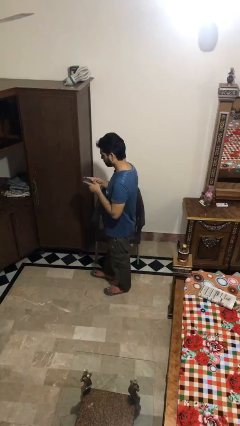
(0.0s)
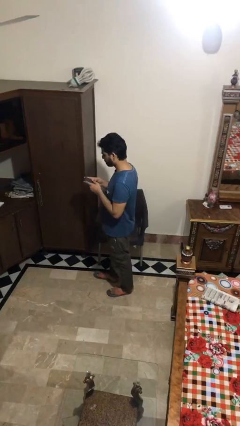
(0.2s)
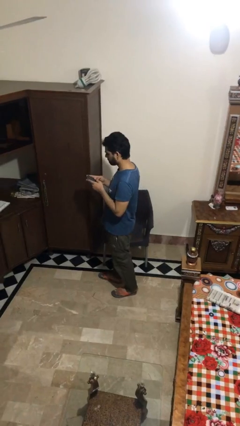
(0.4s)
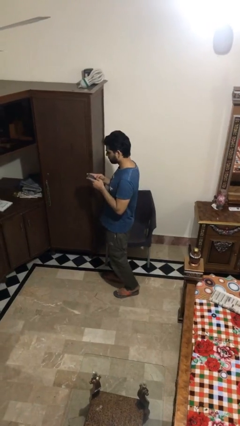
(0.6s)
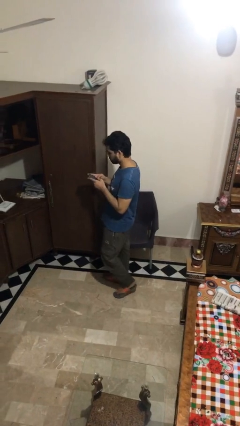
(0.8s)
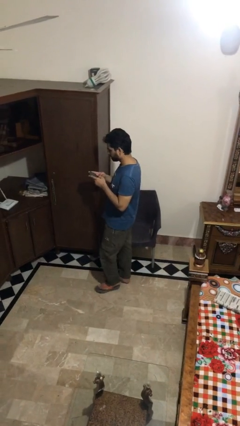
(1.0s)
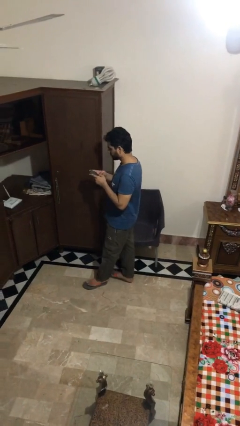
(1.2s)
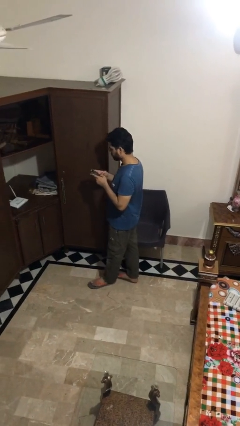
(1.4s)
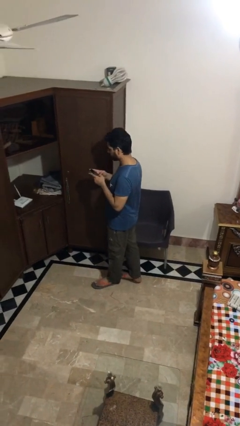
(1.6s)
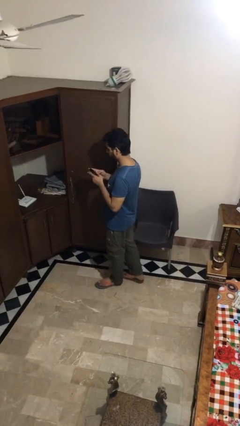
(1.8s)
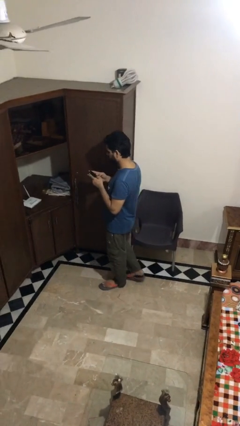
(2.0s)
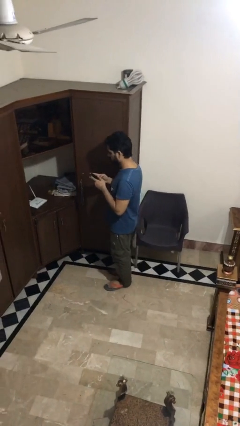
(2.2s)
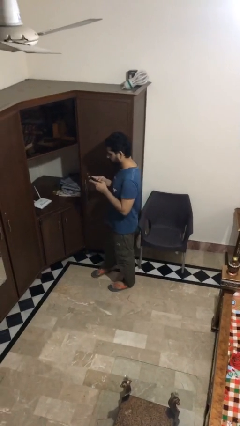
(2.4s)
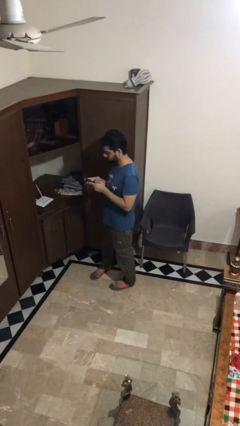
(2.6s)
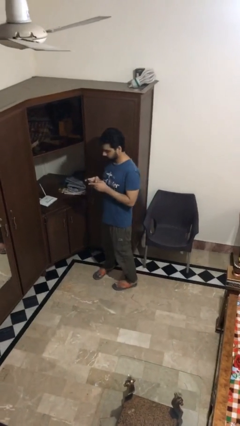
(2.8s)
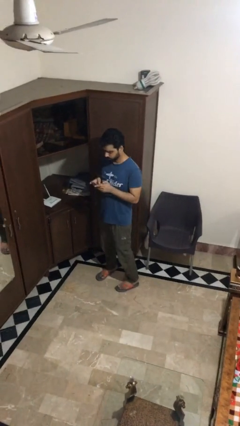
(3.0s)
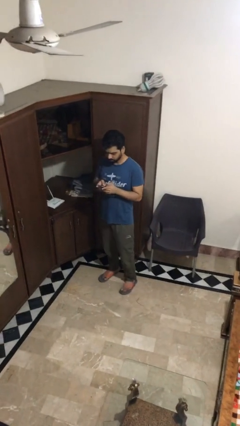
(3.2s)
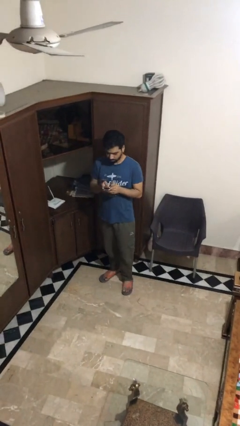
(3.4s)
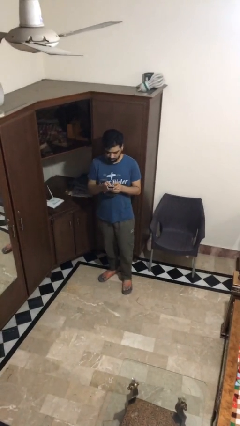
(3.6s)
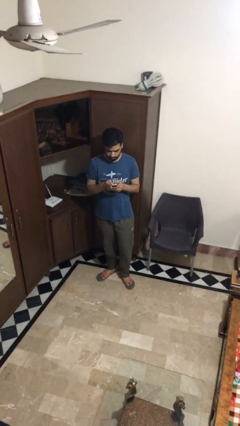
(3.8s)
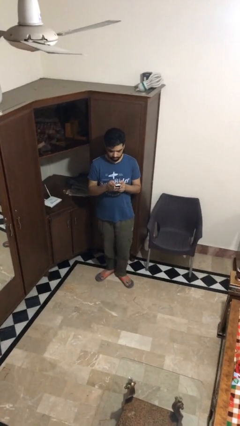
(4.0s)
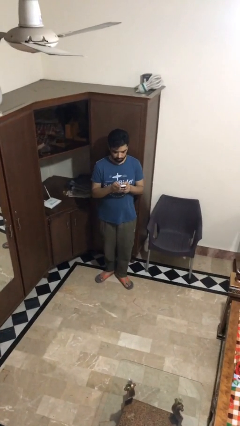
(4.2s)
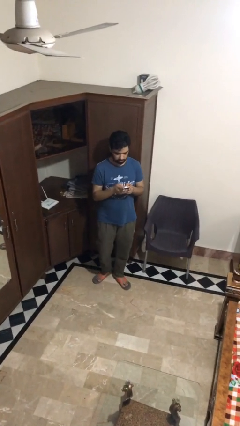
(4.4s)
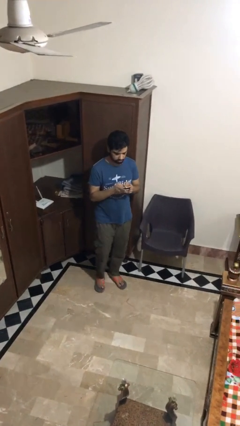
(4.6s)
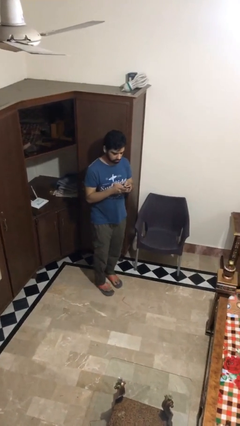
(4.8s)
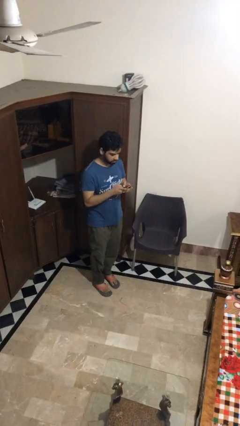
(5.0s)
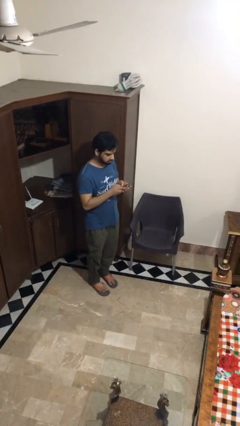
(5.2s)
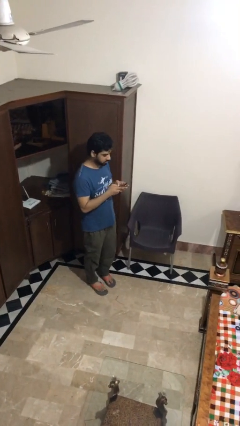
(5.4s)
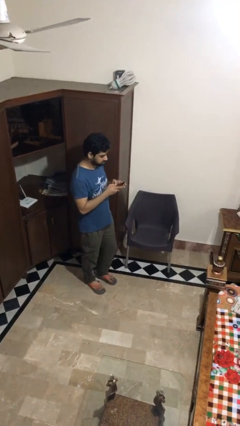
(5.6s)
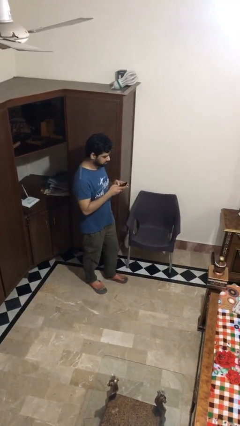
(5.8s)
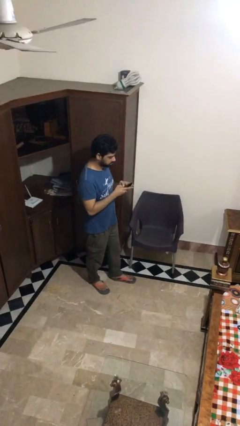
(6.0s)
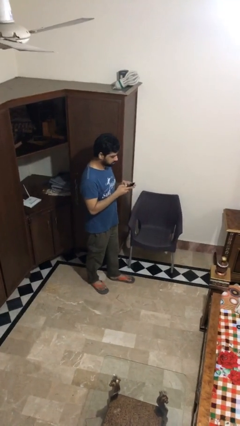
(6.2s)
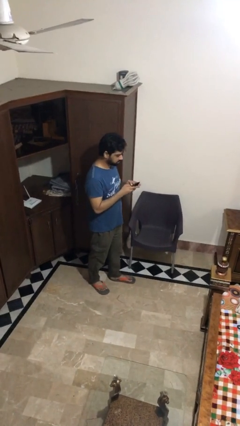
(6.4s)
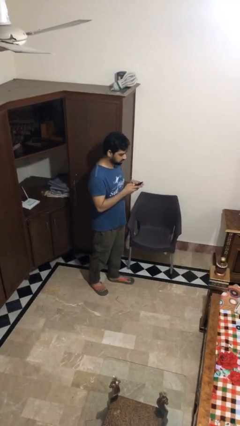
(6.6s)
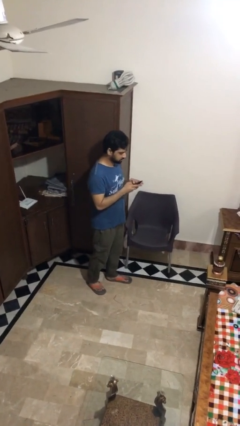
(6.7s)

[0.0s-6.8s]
person texts on phone

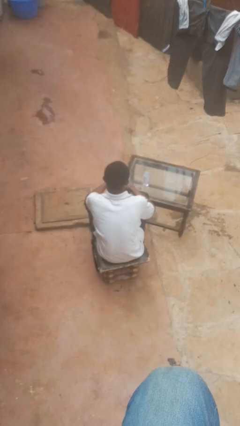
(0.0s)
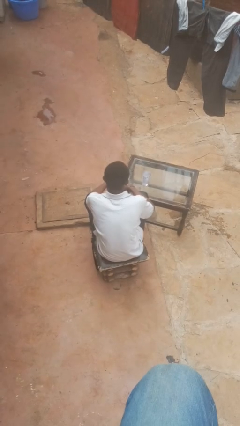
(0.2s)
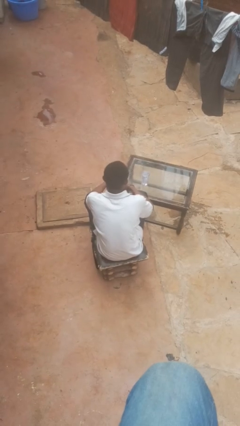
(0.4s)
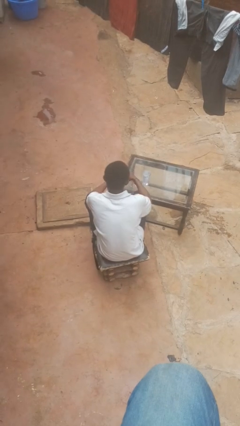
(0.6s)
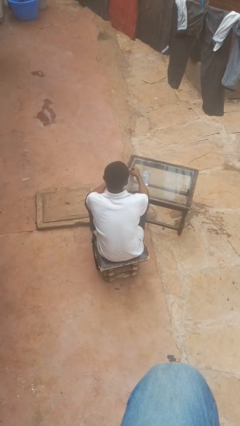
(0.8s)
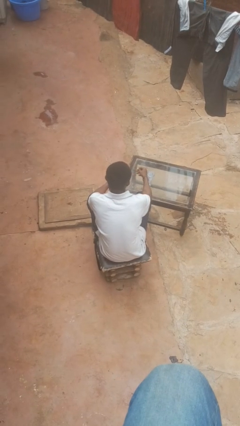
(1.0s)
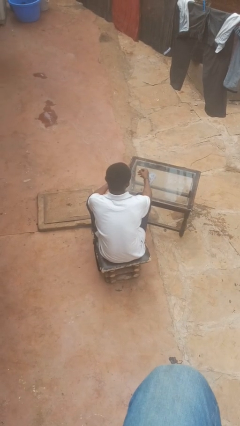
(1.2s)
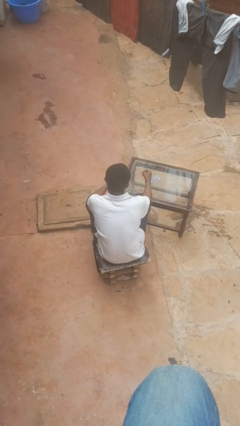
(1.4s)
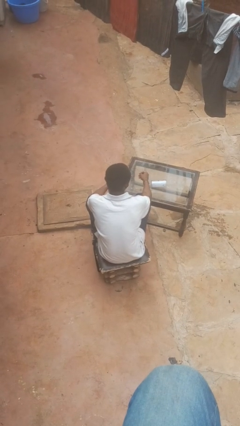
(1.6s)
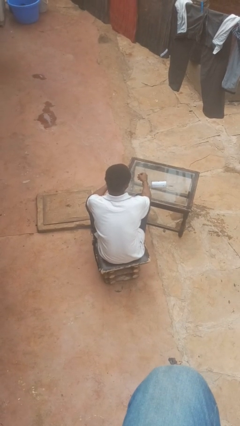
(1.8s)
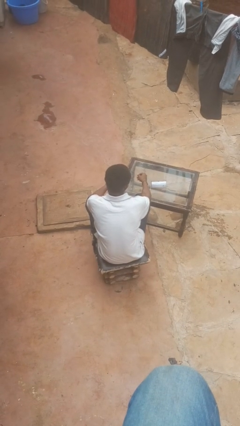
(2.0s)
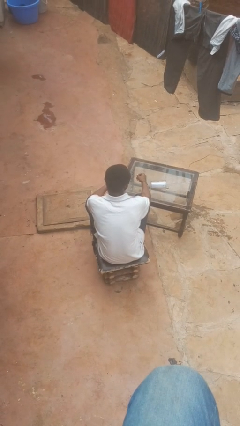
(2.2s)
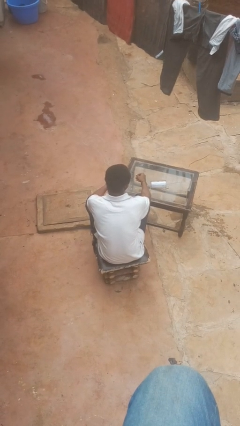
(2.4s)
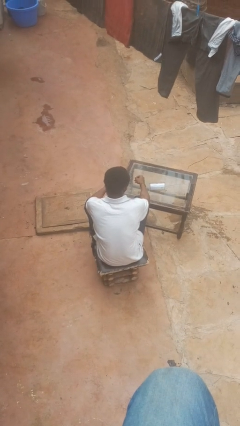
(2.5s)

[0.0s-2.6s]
person knocks over glass

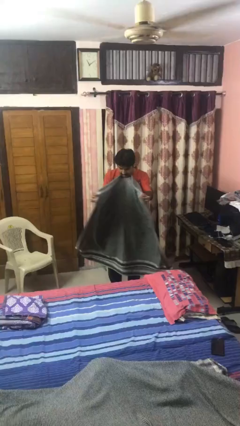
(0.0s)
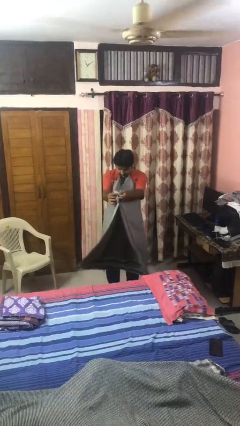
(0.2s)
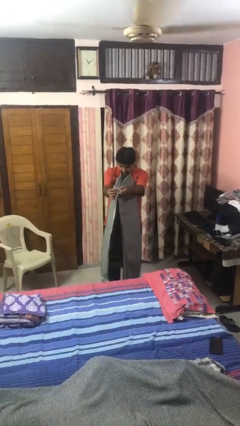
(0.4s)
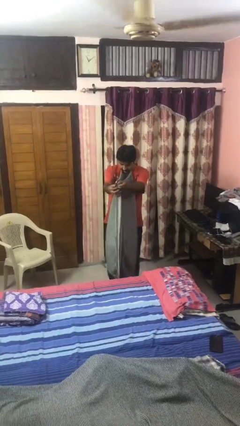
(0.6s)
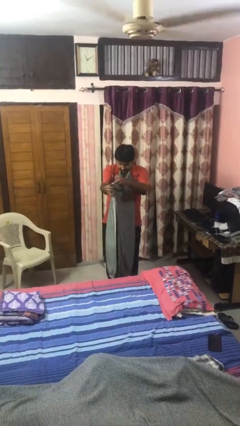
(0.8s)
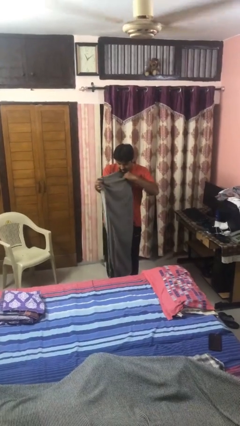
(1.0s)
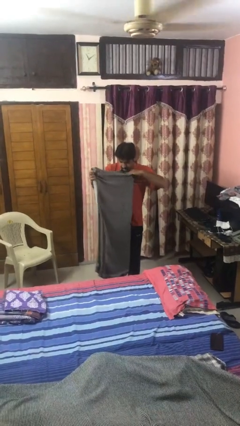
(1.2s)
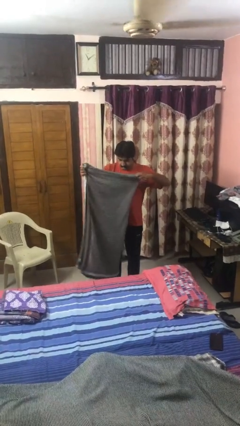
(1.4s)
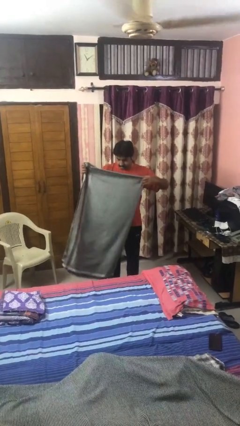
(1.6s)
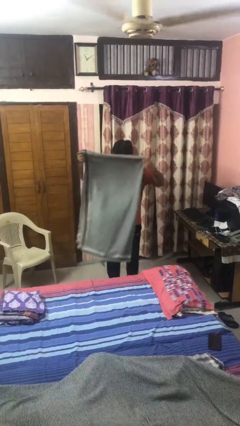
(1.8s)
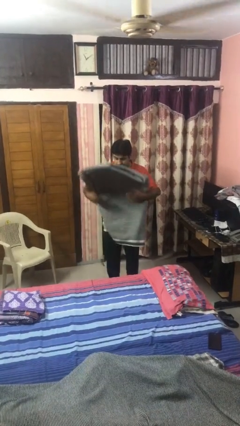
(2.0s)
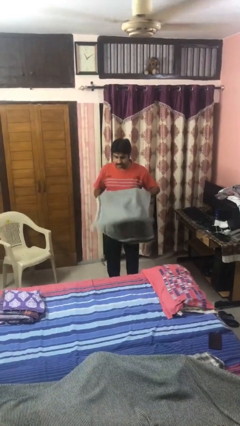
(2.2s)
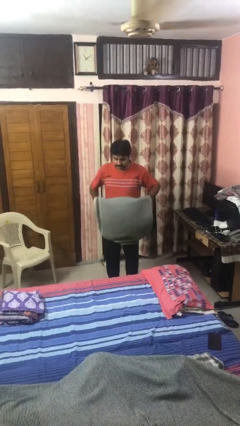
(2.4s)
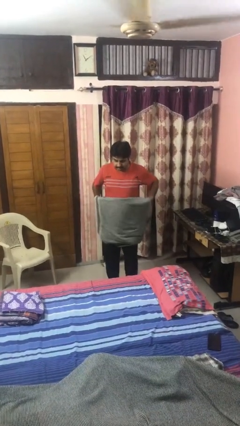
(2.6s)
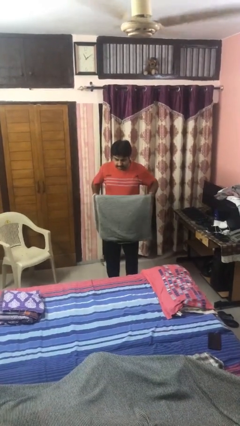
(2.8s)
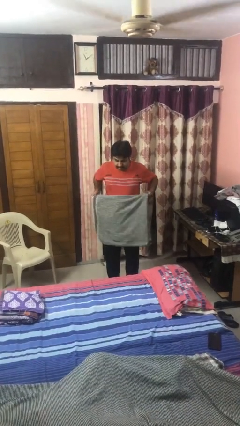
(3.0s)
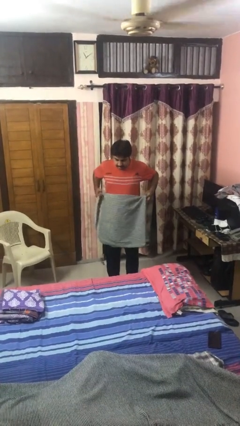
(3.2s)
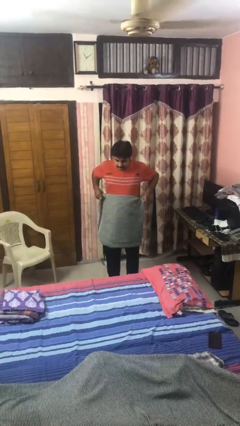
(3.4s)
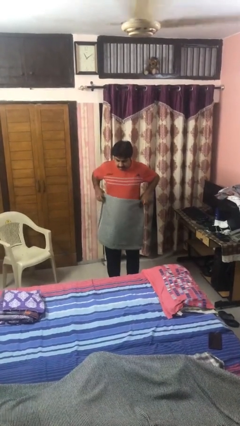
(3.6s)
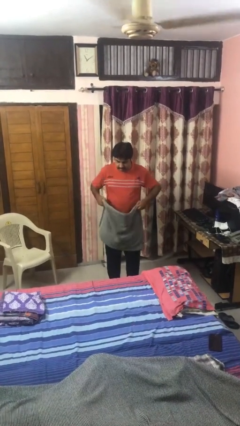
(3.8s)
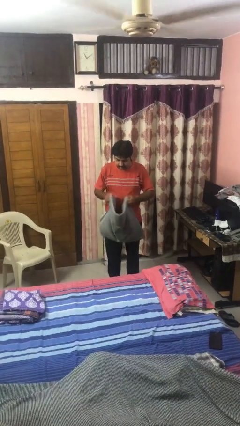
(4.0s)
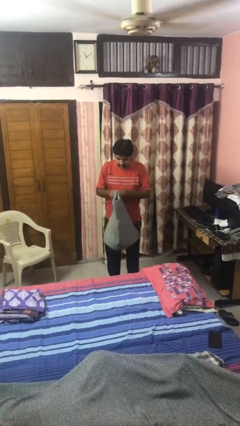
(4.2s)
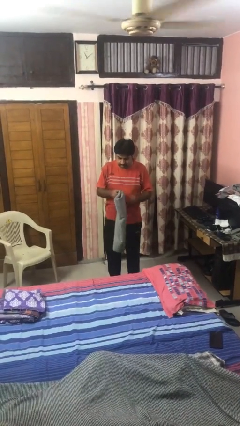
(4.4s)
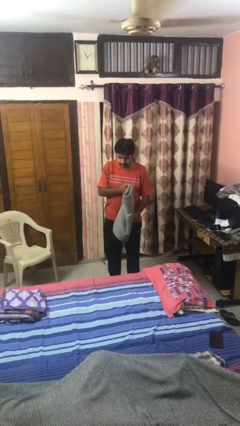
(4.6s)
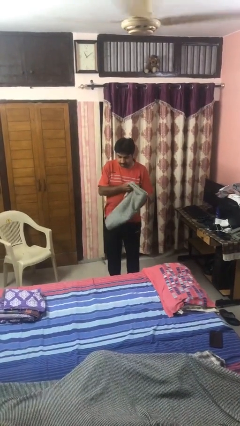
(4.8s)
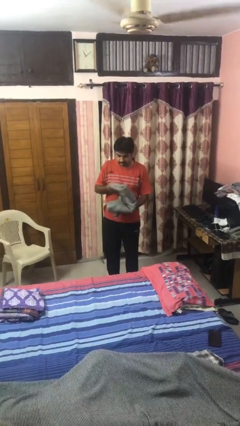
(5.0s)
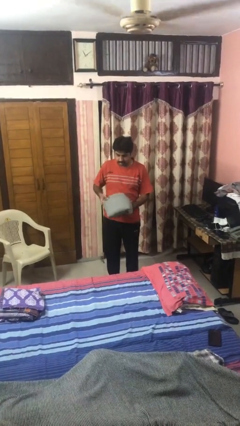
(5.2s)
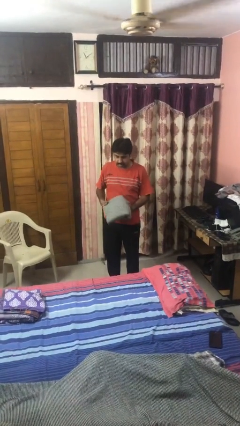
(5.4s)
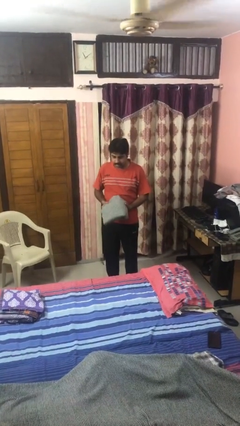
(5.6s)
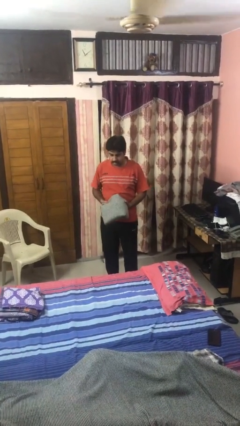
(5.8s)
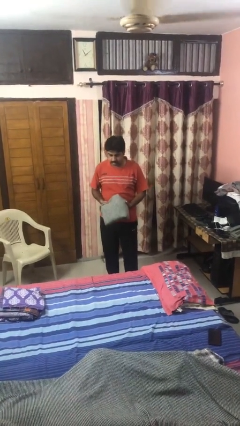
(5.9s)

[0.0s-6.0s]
person folds blanket

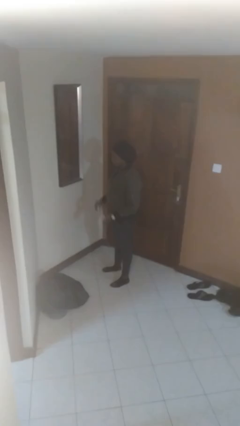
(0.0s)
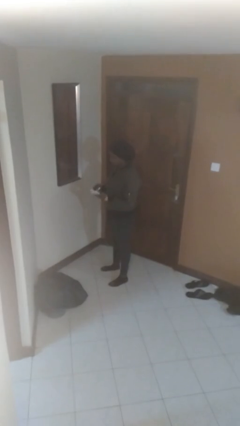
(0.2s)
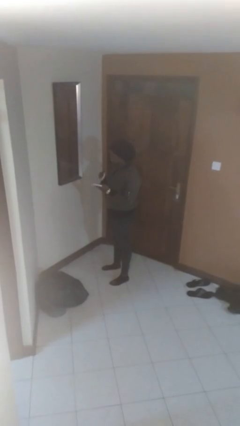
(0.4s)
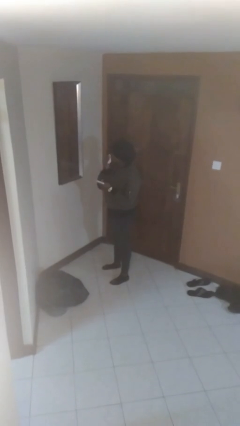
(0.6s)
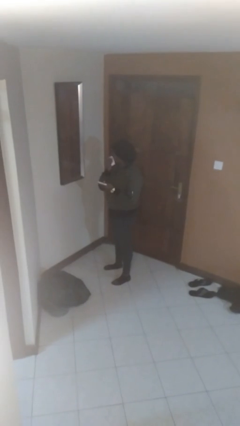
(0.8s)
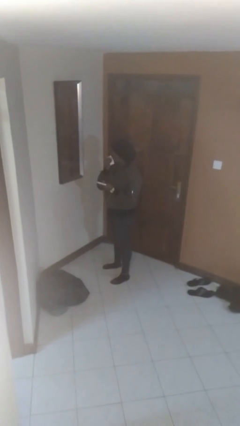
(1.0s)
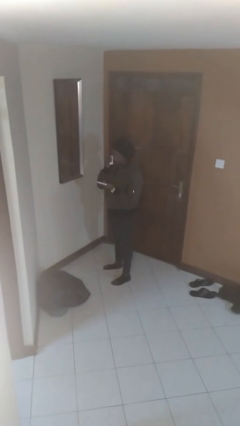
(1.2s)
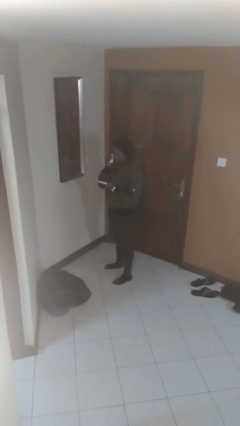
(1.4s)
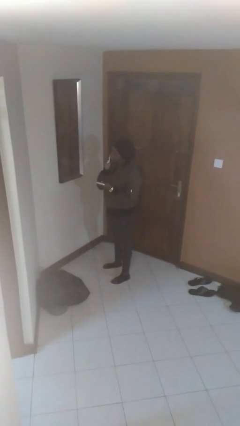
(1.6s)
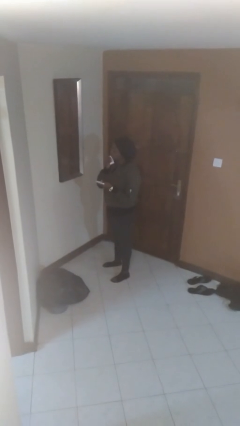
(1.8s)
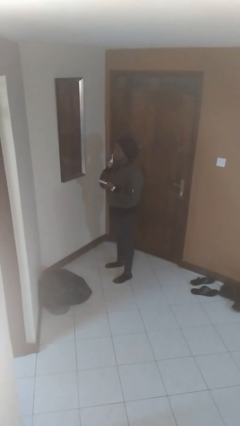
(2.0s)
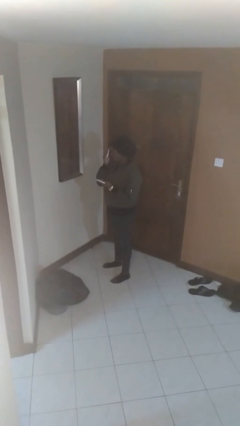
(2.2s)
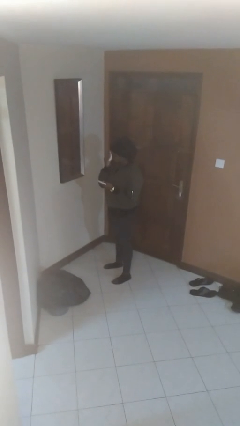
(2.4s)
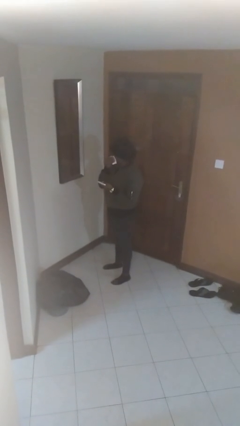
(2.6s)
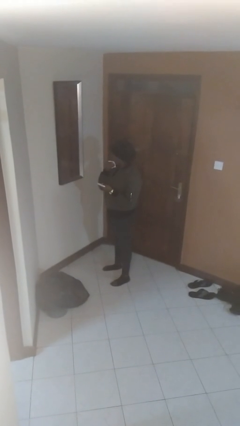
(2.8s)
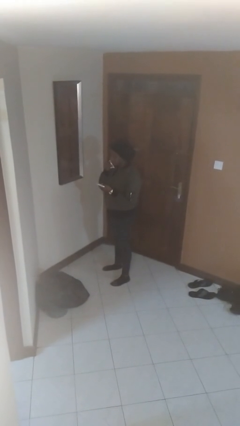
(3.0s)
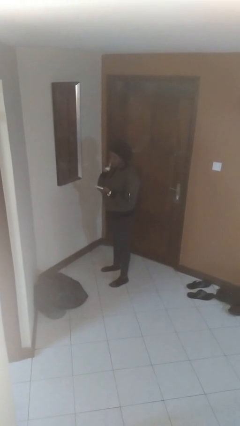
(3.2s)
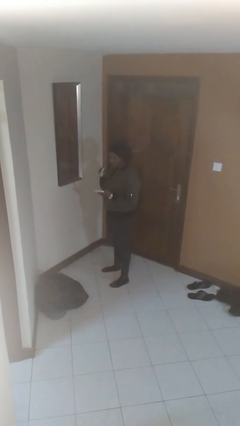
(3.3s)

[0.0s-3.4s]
person applies foundation makeup
